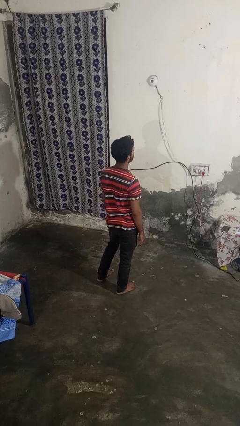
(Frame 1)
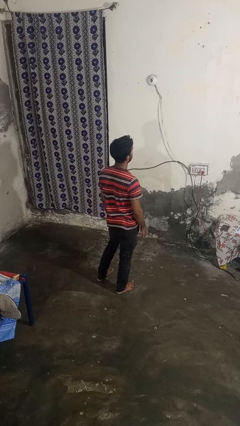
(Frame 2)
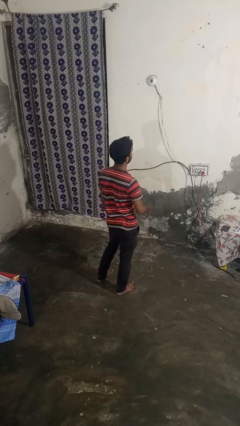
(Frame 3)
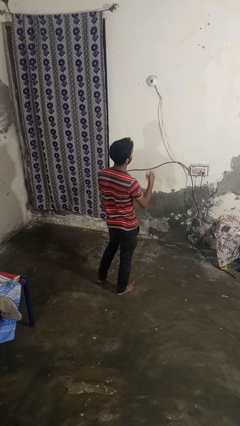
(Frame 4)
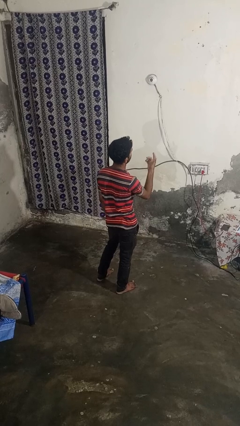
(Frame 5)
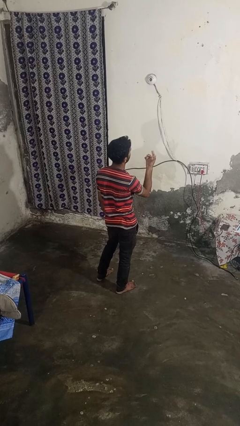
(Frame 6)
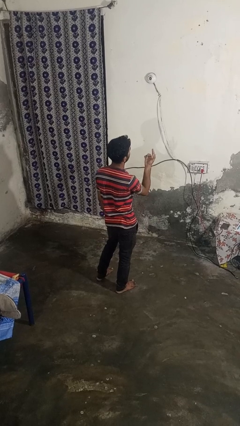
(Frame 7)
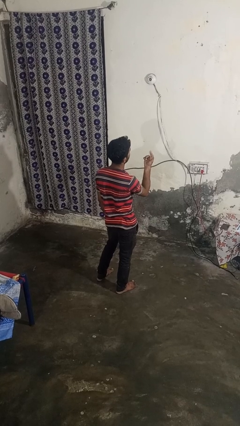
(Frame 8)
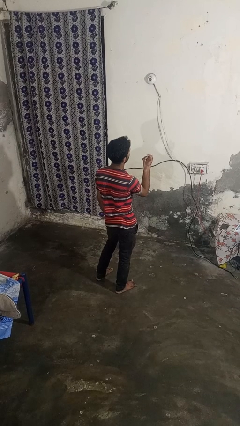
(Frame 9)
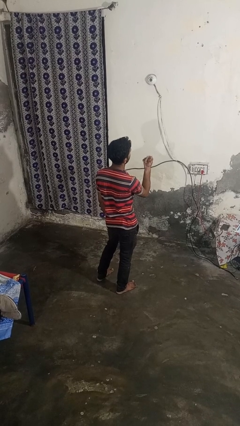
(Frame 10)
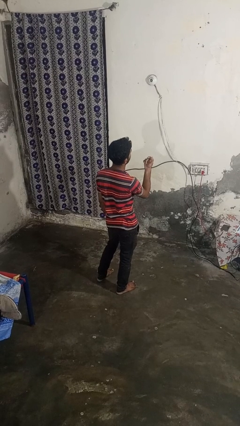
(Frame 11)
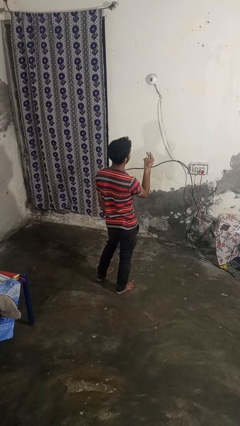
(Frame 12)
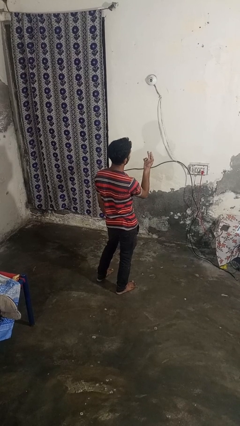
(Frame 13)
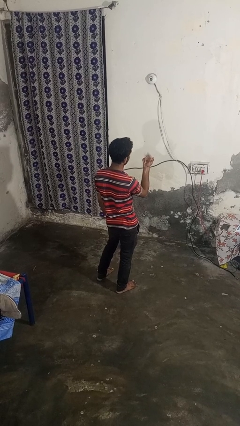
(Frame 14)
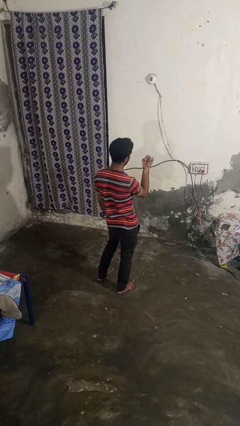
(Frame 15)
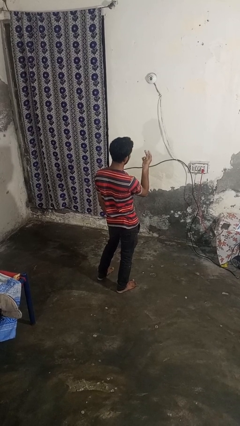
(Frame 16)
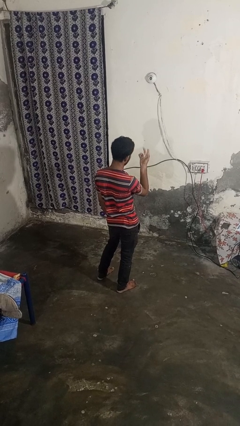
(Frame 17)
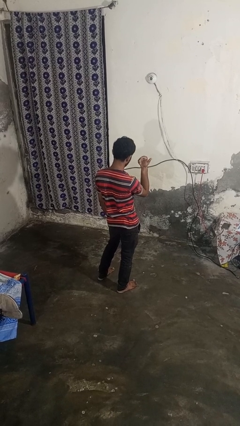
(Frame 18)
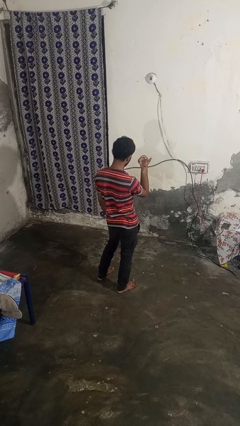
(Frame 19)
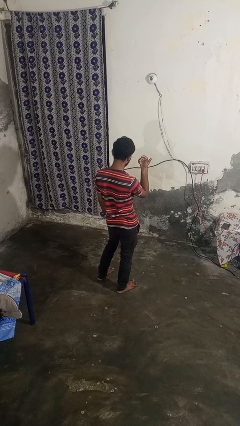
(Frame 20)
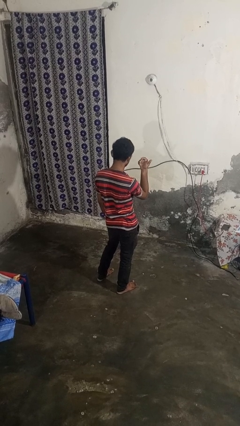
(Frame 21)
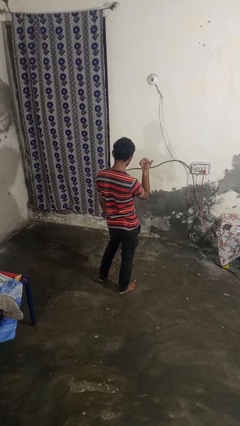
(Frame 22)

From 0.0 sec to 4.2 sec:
person gestures come here

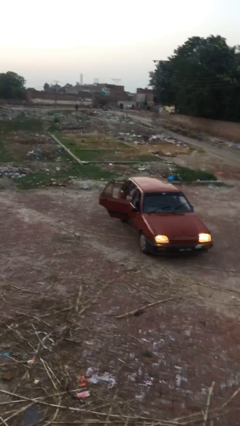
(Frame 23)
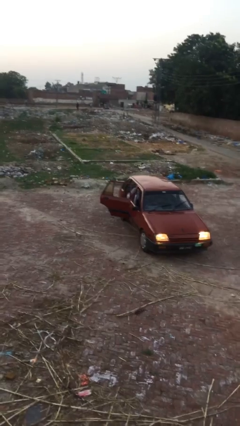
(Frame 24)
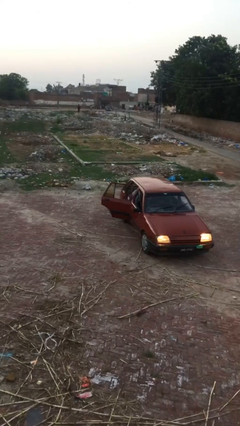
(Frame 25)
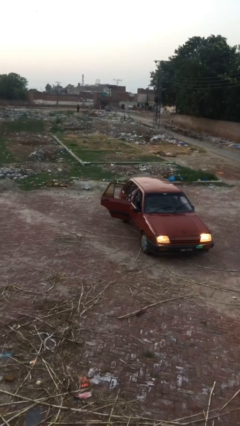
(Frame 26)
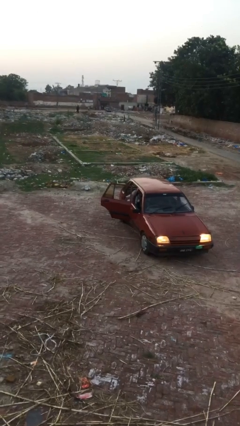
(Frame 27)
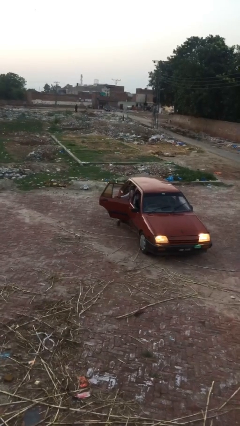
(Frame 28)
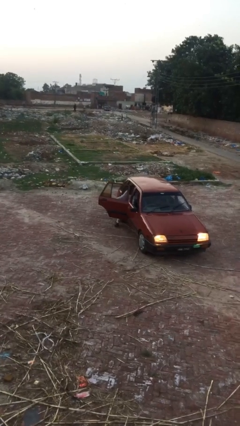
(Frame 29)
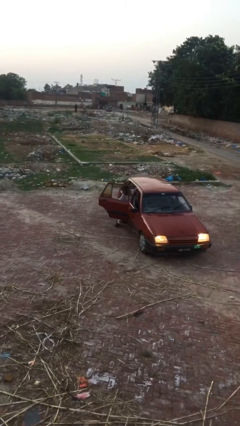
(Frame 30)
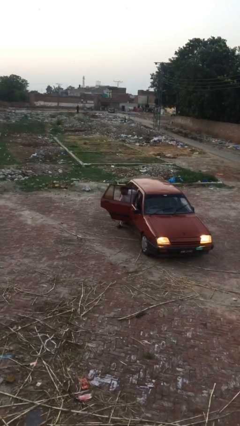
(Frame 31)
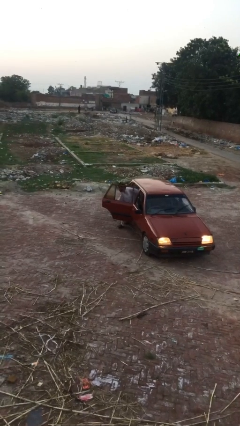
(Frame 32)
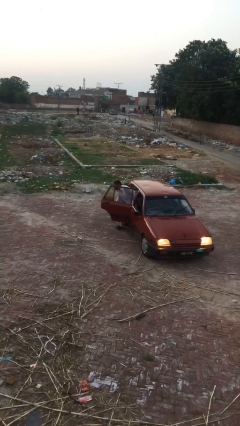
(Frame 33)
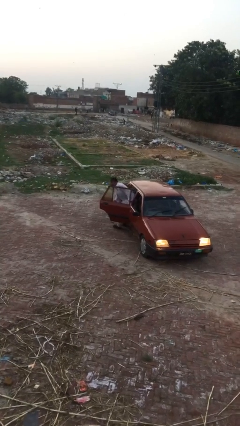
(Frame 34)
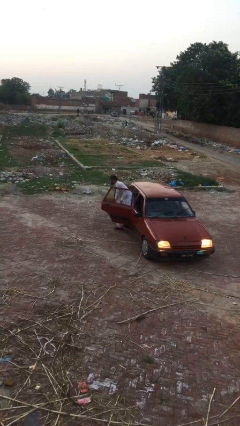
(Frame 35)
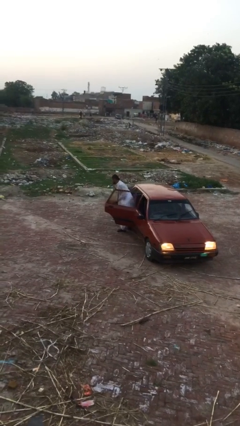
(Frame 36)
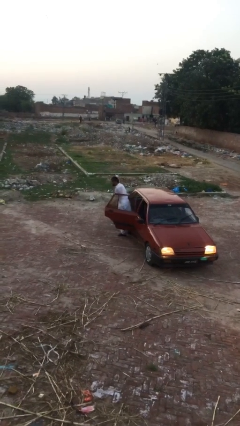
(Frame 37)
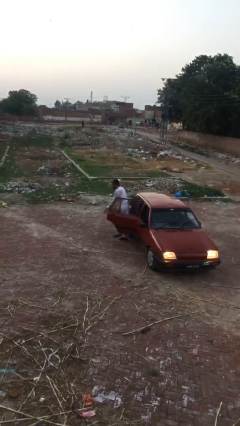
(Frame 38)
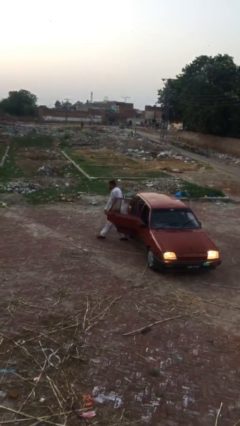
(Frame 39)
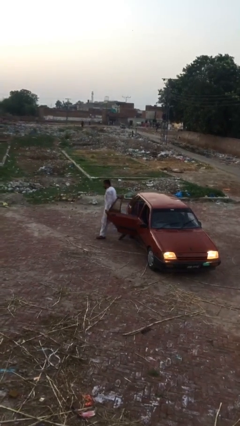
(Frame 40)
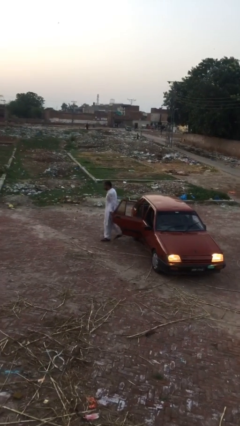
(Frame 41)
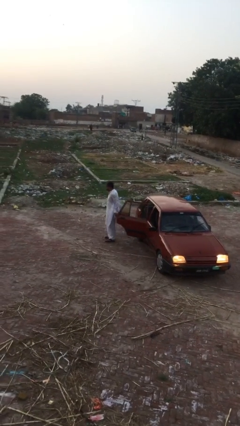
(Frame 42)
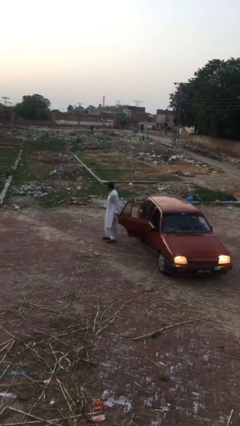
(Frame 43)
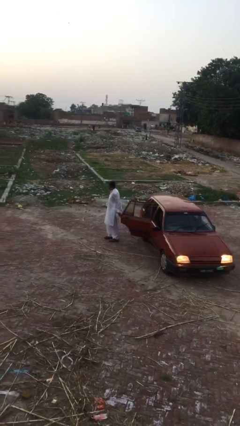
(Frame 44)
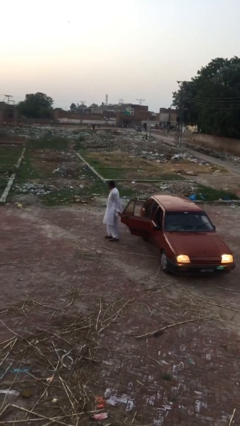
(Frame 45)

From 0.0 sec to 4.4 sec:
person exits car

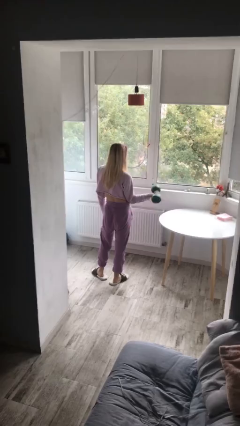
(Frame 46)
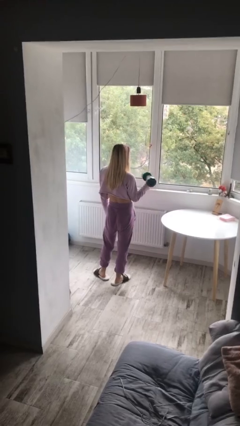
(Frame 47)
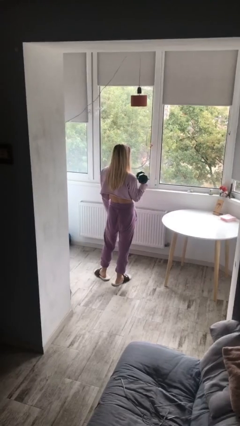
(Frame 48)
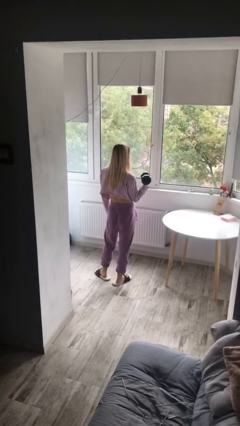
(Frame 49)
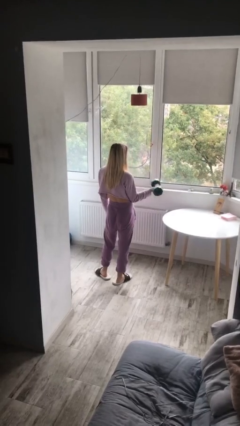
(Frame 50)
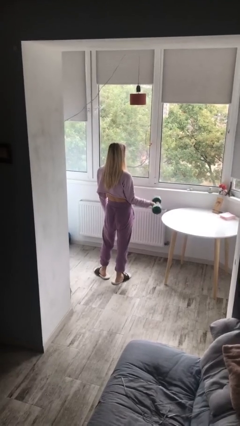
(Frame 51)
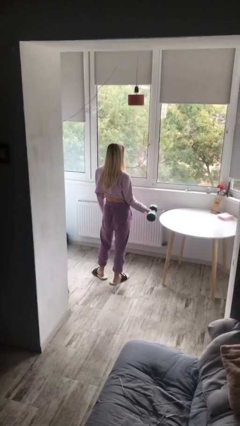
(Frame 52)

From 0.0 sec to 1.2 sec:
person lifts dumbbells

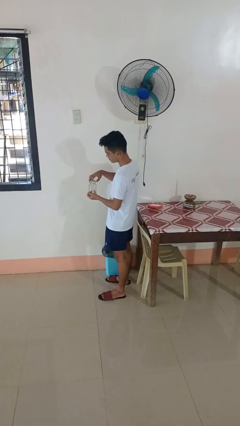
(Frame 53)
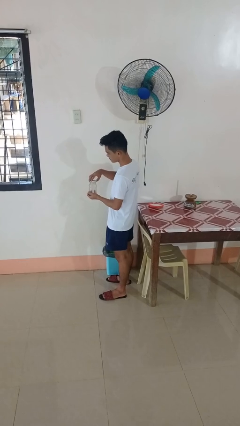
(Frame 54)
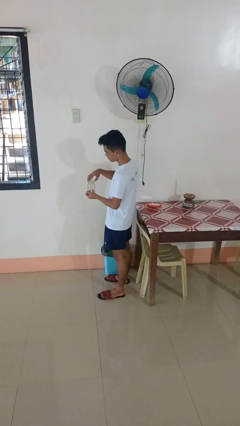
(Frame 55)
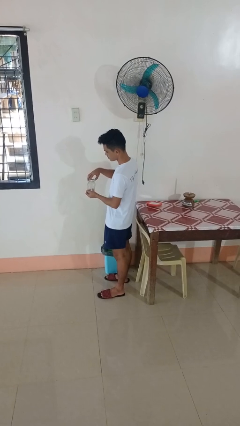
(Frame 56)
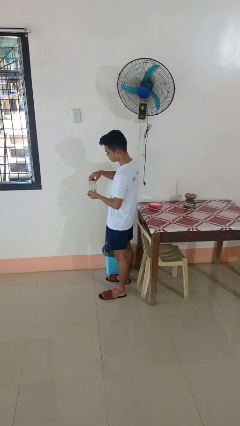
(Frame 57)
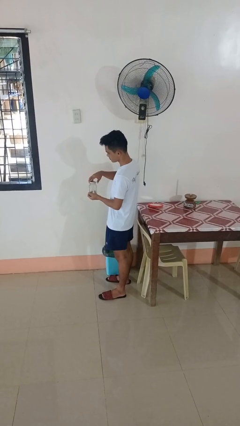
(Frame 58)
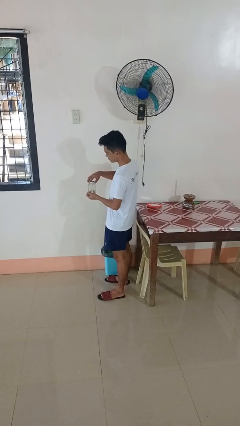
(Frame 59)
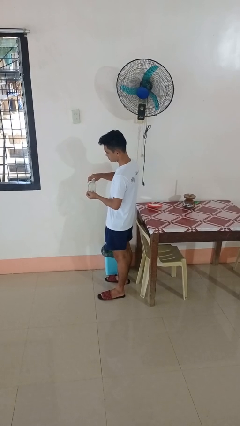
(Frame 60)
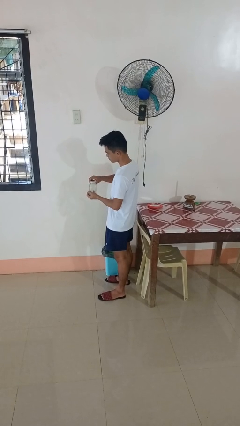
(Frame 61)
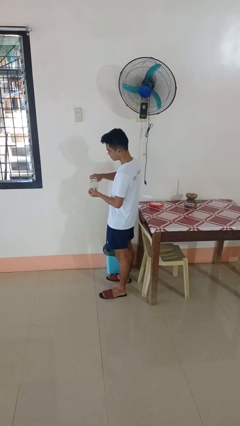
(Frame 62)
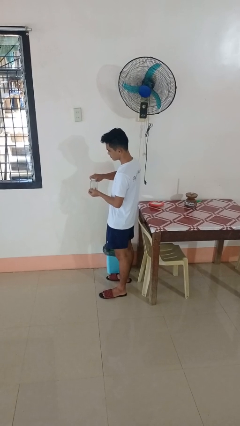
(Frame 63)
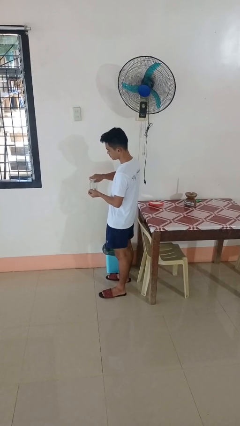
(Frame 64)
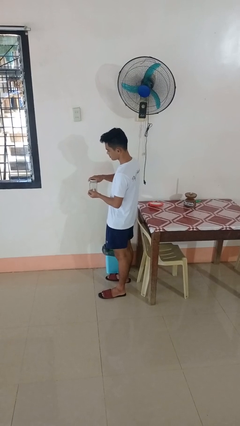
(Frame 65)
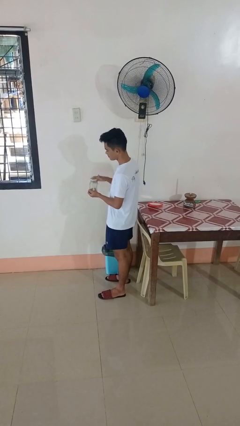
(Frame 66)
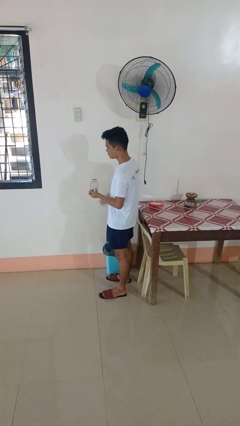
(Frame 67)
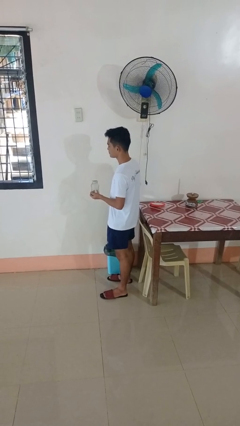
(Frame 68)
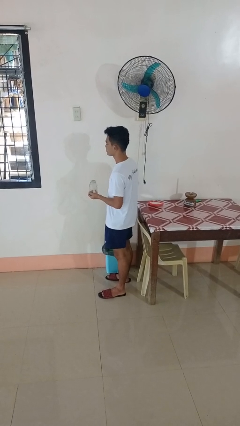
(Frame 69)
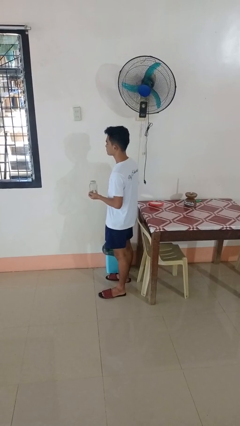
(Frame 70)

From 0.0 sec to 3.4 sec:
person closes jar

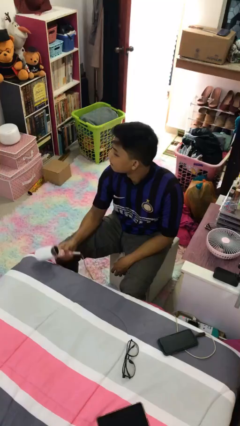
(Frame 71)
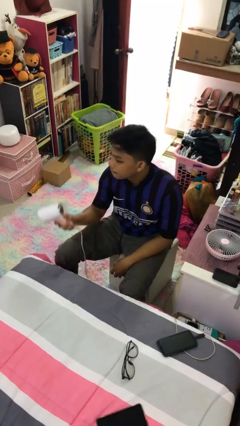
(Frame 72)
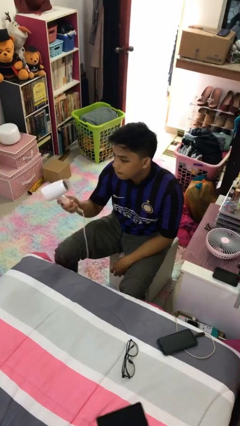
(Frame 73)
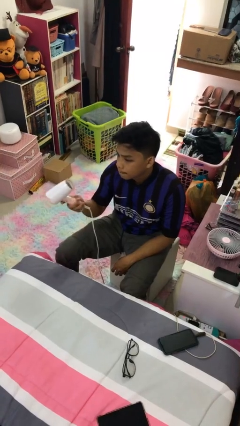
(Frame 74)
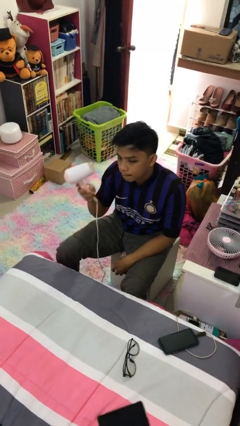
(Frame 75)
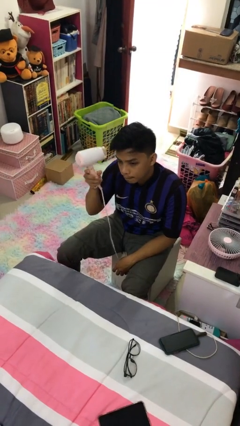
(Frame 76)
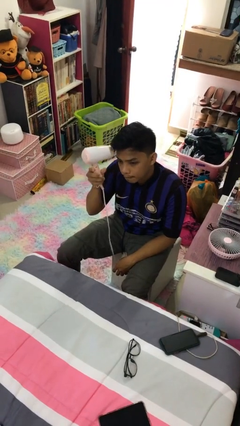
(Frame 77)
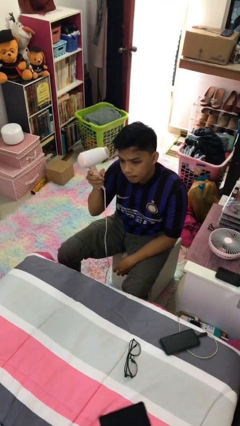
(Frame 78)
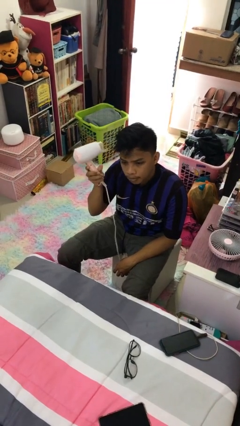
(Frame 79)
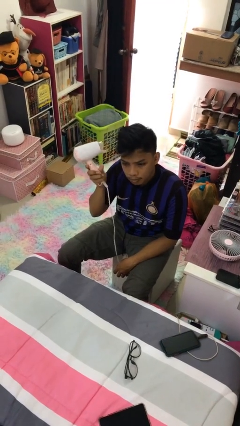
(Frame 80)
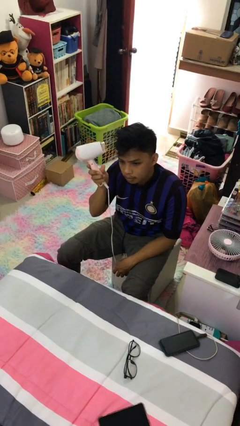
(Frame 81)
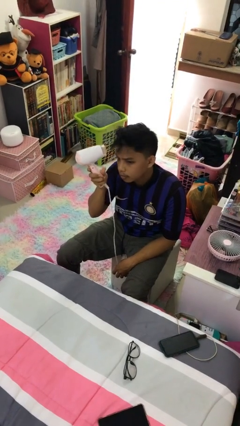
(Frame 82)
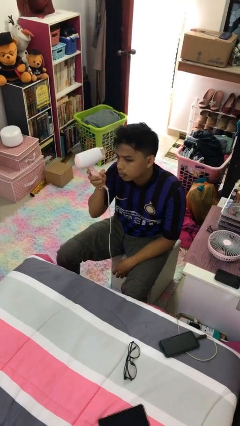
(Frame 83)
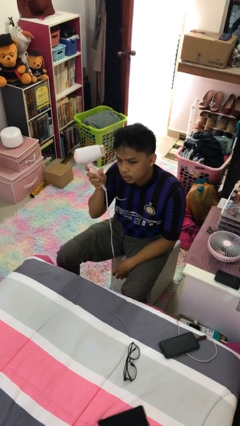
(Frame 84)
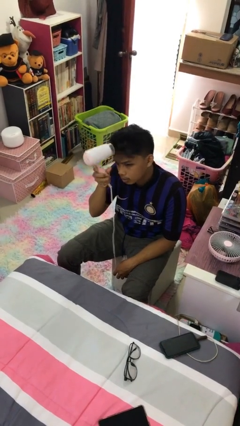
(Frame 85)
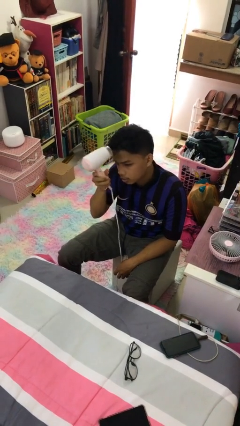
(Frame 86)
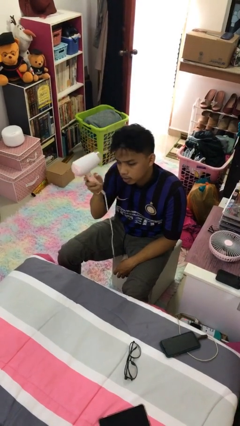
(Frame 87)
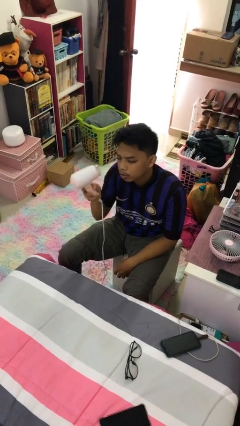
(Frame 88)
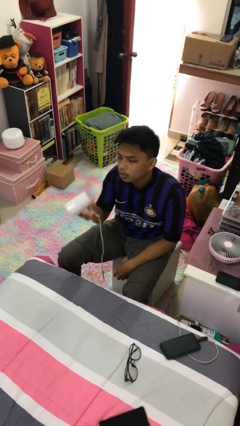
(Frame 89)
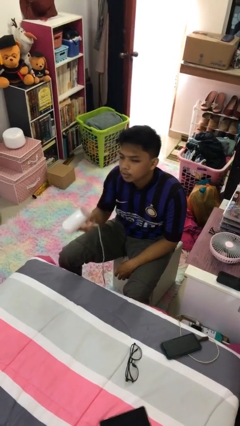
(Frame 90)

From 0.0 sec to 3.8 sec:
person dries hair with hairdryer

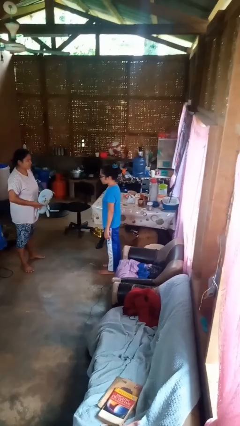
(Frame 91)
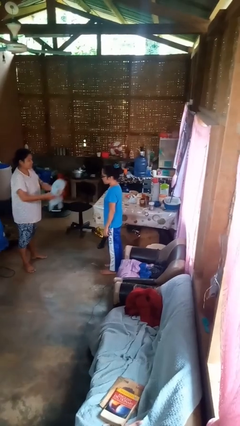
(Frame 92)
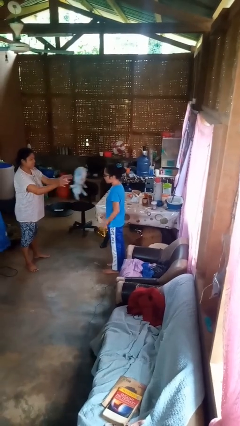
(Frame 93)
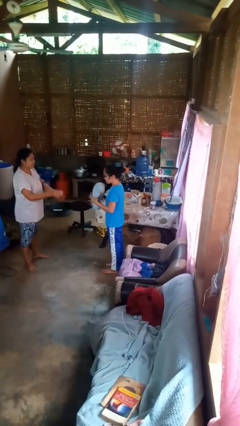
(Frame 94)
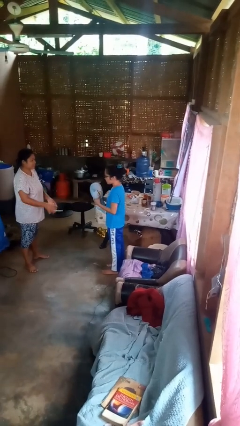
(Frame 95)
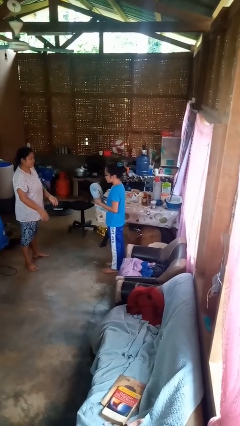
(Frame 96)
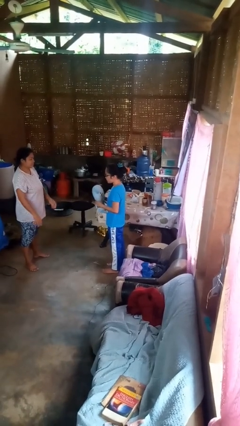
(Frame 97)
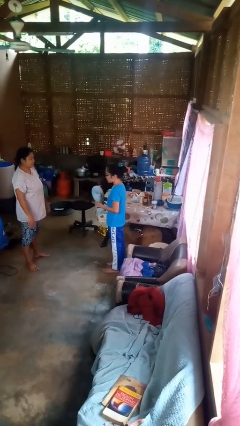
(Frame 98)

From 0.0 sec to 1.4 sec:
person catches object from person
